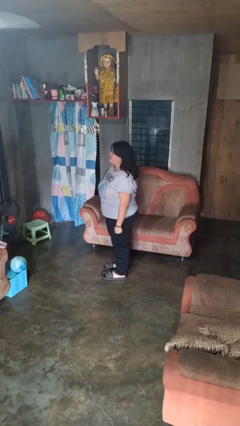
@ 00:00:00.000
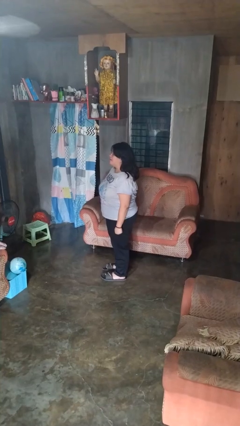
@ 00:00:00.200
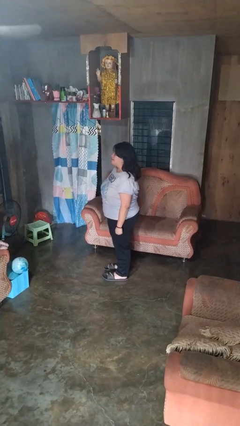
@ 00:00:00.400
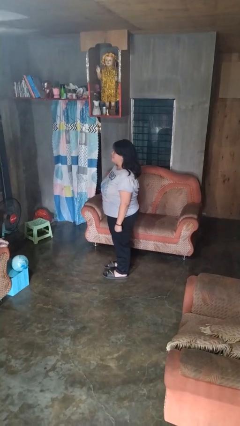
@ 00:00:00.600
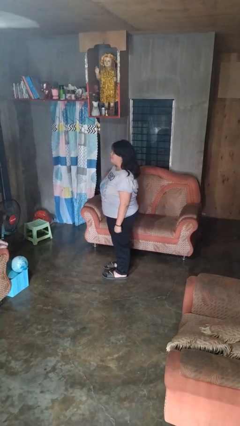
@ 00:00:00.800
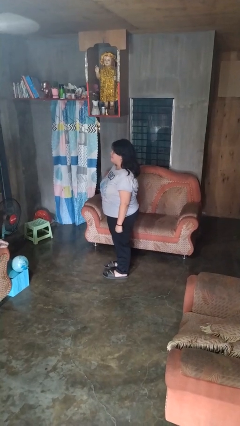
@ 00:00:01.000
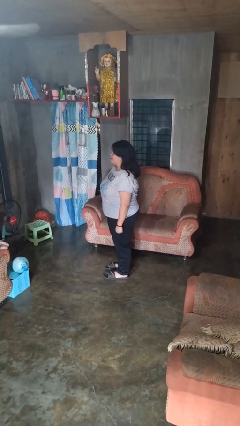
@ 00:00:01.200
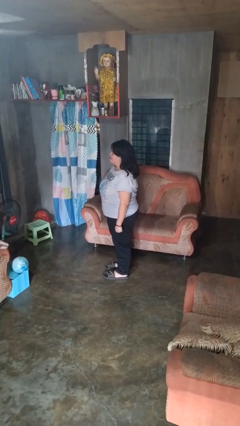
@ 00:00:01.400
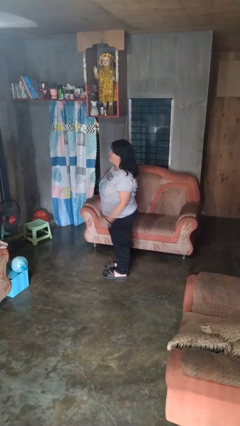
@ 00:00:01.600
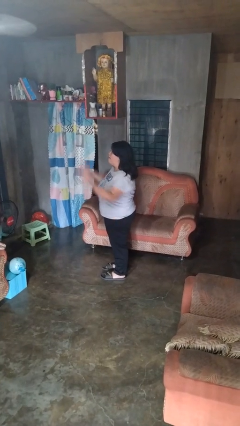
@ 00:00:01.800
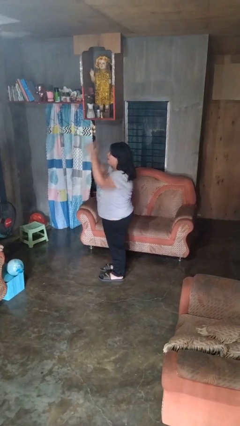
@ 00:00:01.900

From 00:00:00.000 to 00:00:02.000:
person stretches arms over head

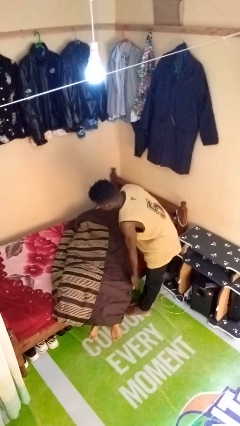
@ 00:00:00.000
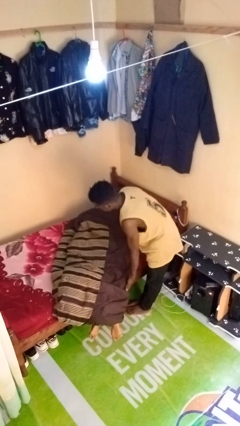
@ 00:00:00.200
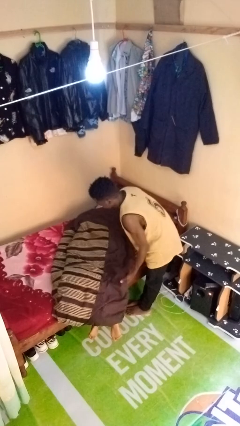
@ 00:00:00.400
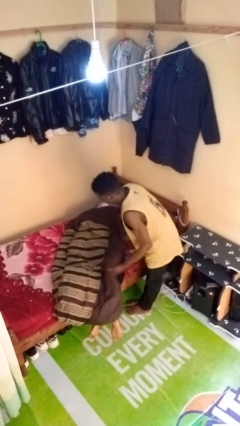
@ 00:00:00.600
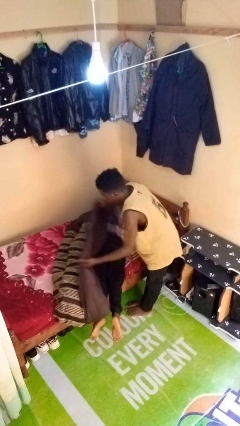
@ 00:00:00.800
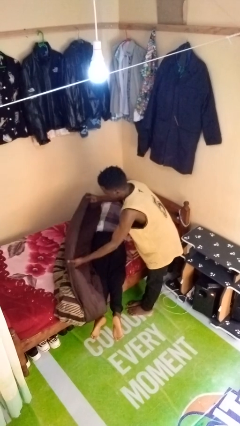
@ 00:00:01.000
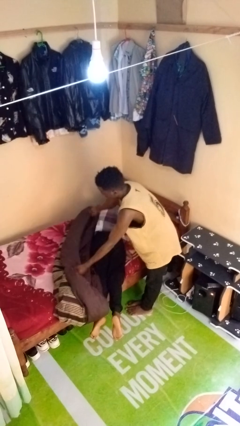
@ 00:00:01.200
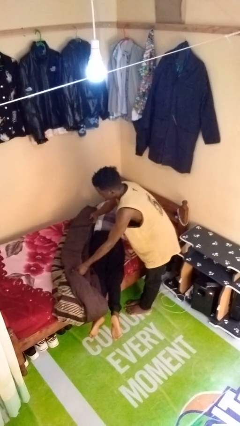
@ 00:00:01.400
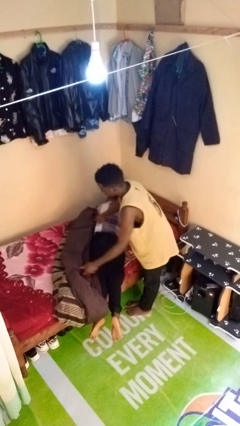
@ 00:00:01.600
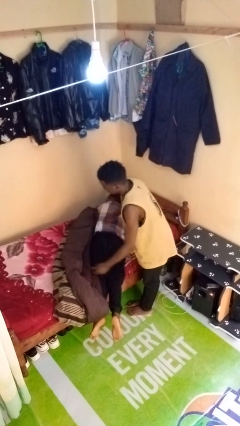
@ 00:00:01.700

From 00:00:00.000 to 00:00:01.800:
person uncovers friend with blanket

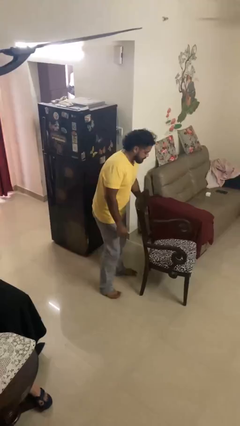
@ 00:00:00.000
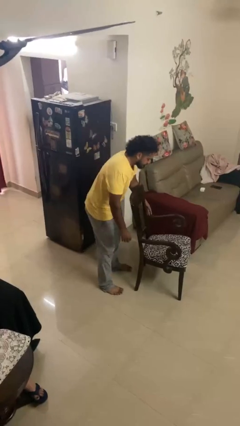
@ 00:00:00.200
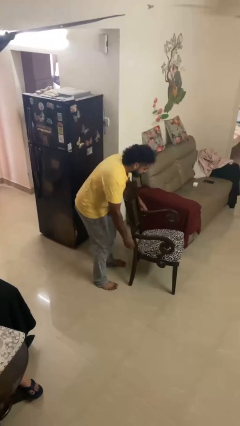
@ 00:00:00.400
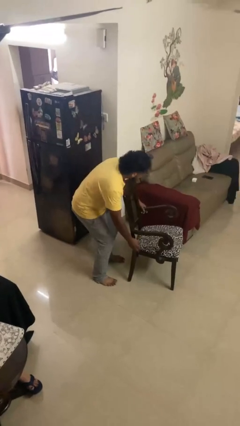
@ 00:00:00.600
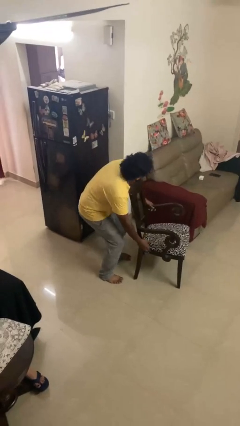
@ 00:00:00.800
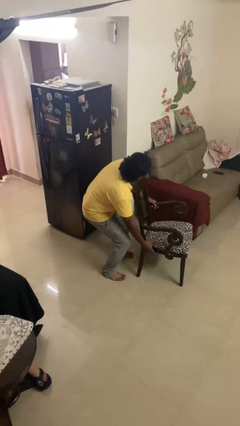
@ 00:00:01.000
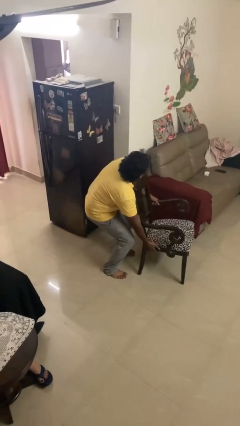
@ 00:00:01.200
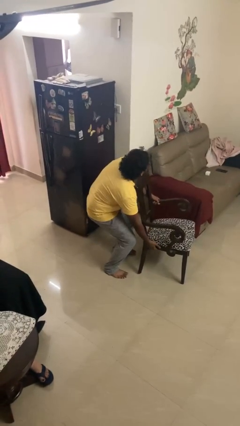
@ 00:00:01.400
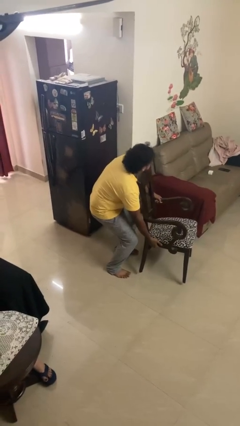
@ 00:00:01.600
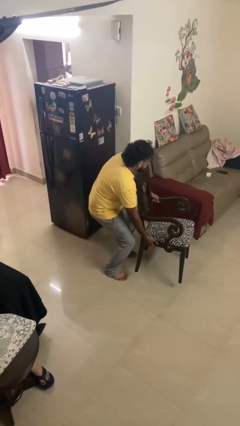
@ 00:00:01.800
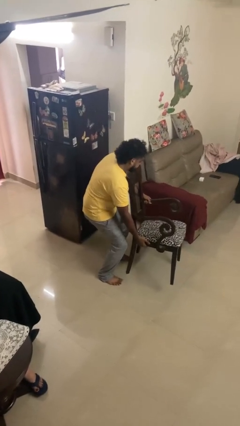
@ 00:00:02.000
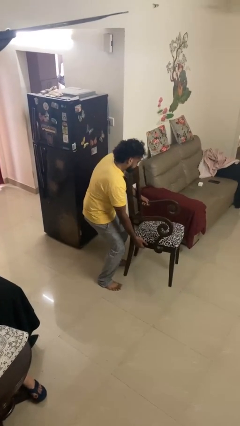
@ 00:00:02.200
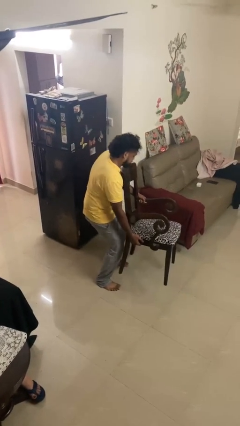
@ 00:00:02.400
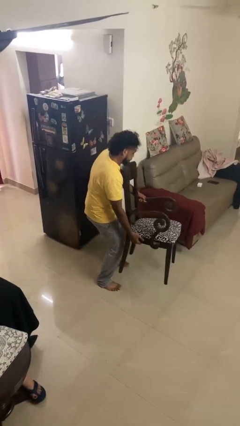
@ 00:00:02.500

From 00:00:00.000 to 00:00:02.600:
person picks up object from floor

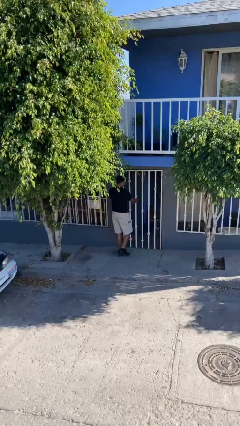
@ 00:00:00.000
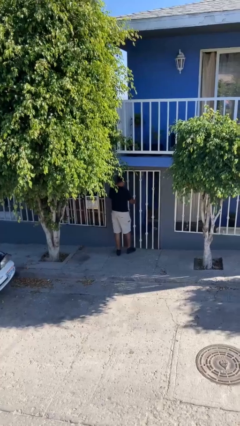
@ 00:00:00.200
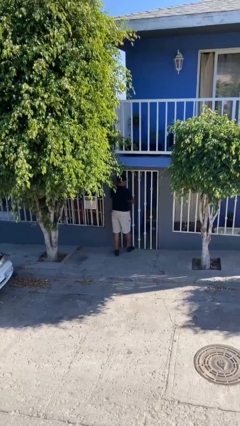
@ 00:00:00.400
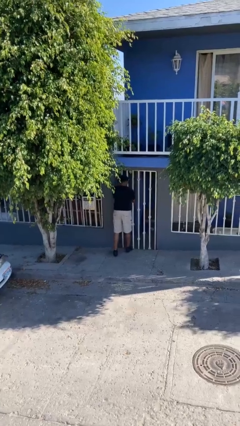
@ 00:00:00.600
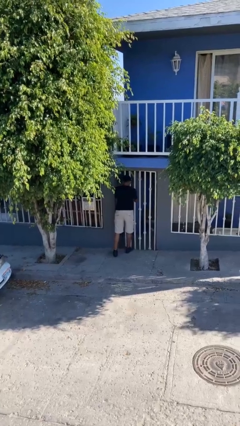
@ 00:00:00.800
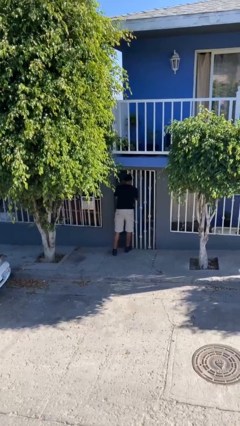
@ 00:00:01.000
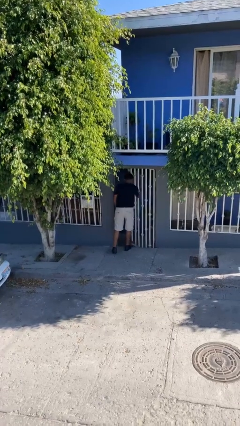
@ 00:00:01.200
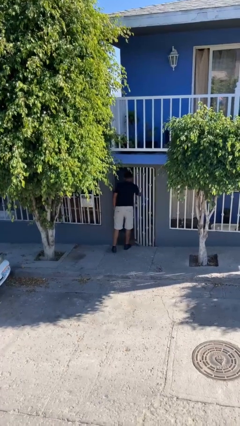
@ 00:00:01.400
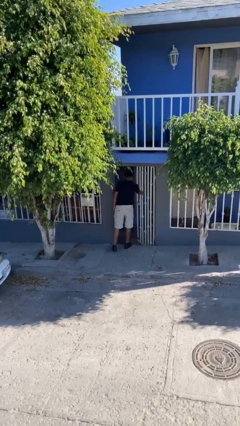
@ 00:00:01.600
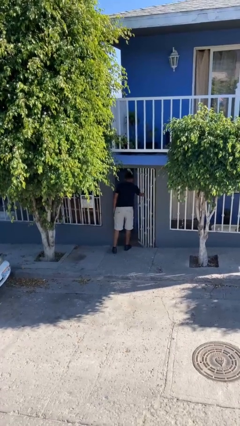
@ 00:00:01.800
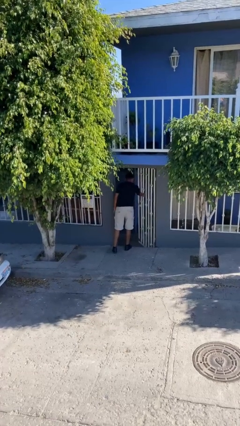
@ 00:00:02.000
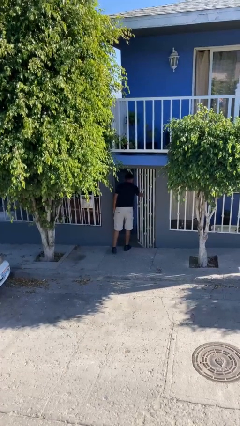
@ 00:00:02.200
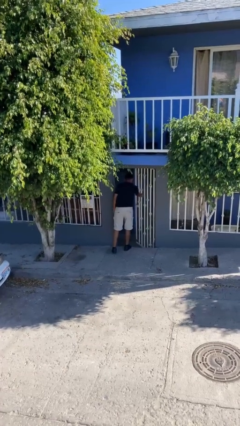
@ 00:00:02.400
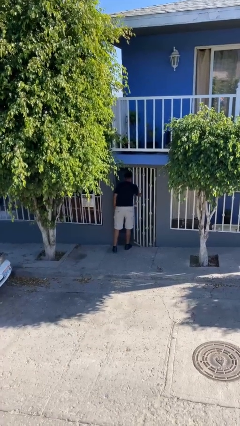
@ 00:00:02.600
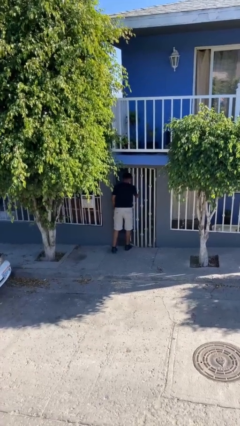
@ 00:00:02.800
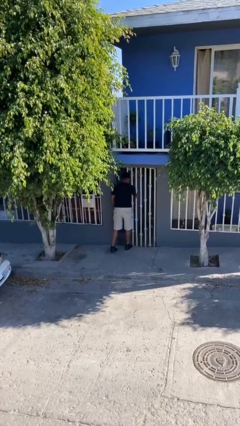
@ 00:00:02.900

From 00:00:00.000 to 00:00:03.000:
person opens facility door

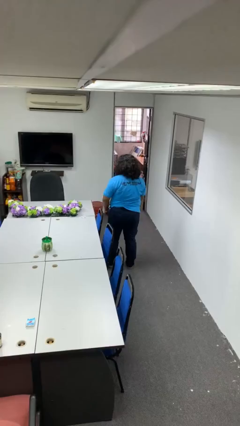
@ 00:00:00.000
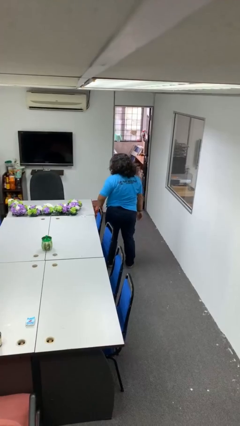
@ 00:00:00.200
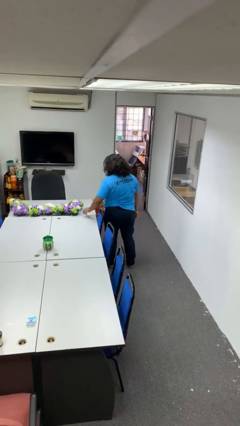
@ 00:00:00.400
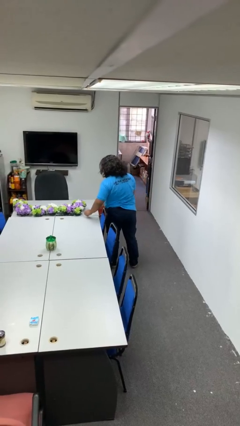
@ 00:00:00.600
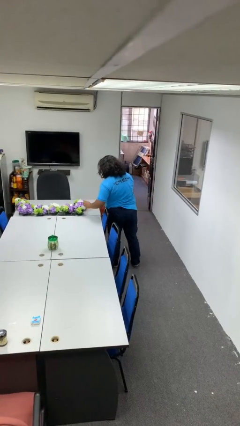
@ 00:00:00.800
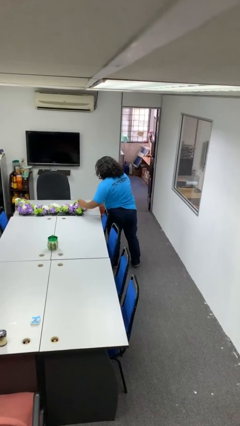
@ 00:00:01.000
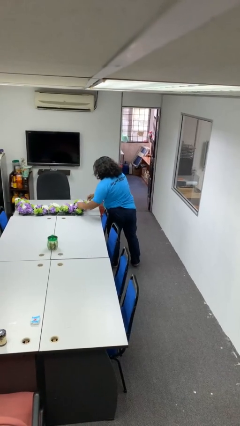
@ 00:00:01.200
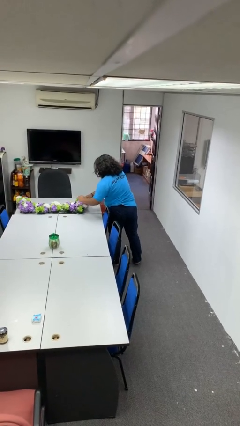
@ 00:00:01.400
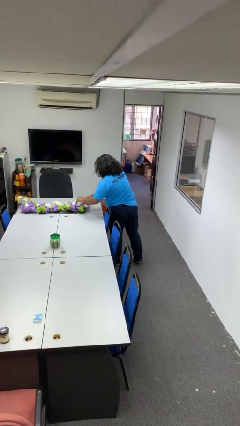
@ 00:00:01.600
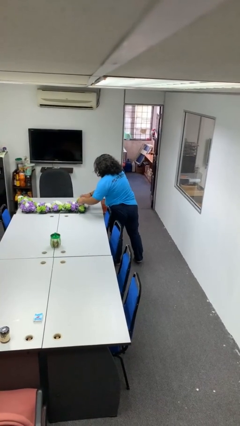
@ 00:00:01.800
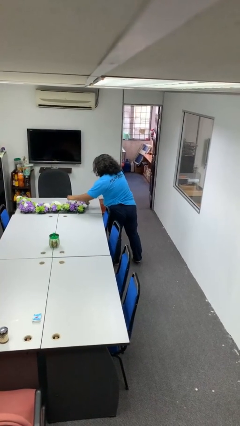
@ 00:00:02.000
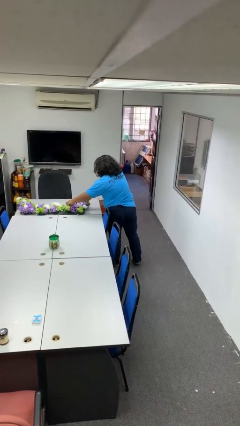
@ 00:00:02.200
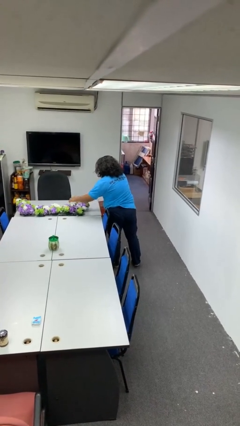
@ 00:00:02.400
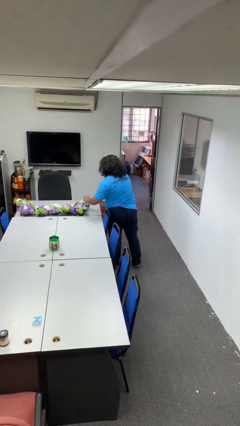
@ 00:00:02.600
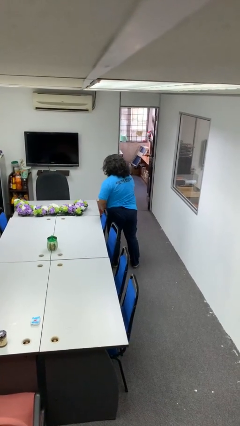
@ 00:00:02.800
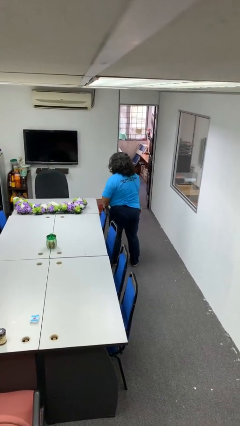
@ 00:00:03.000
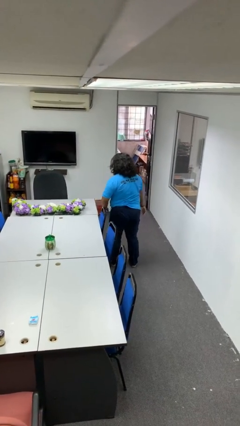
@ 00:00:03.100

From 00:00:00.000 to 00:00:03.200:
person arranges flowers in vase

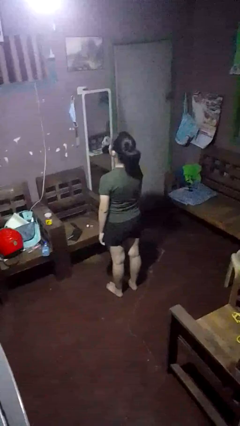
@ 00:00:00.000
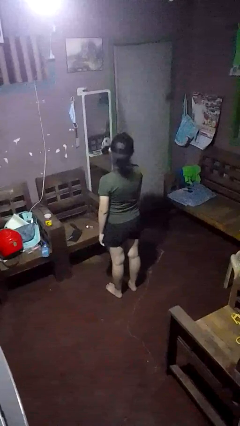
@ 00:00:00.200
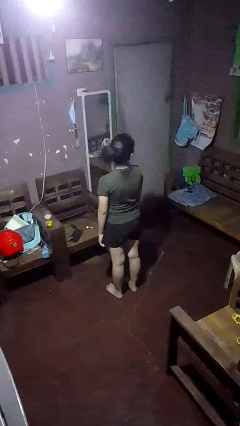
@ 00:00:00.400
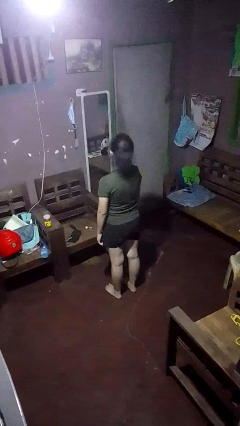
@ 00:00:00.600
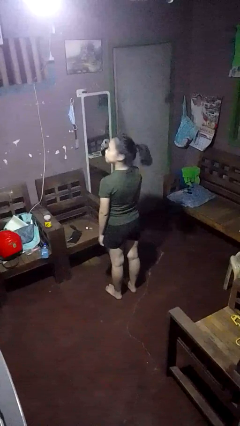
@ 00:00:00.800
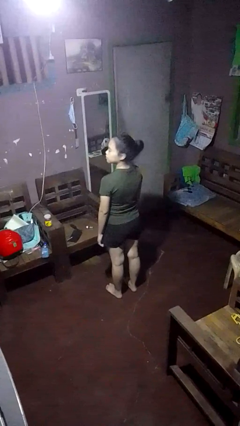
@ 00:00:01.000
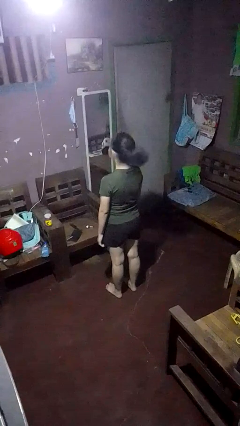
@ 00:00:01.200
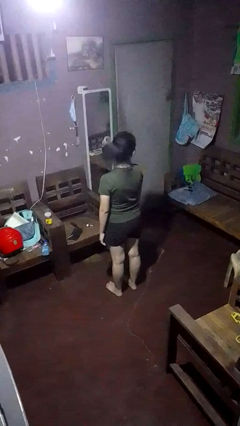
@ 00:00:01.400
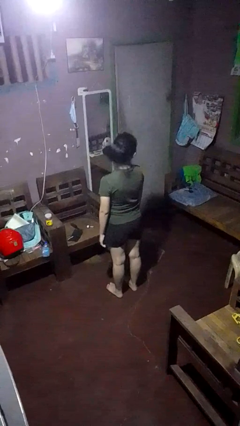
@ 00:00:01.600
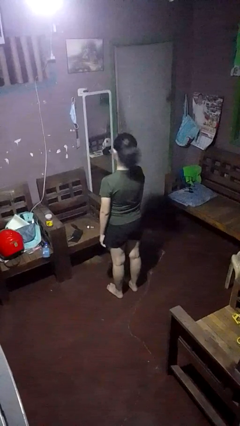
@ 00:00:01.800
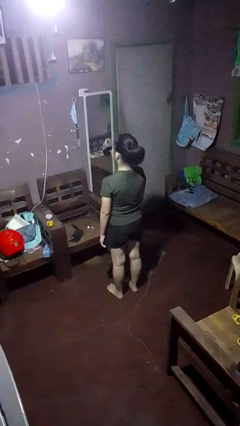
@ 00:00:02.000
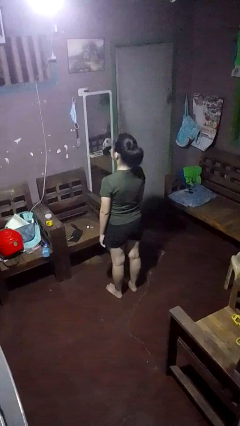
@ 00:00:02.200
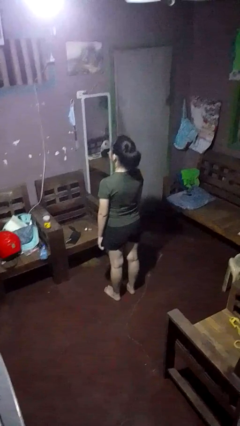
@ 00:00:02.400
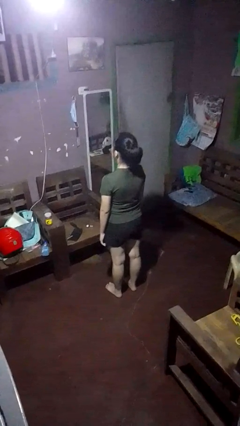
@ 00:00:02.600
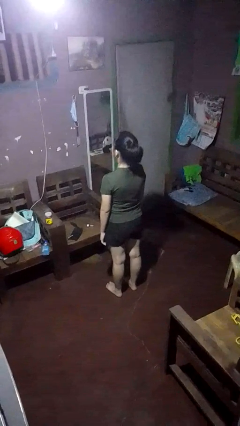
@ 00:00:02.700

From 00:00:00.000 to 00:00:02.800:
person shakes head

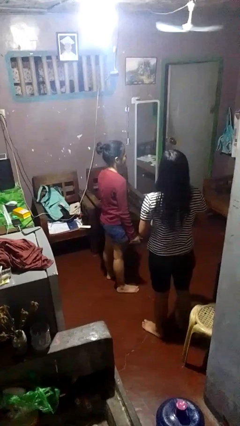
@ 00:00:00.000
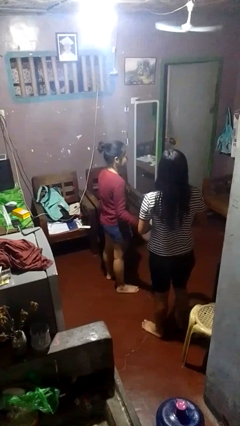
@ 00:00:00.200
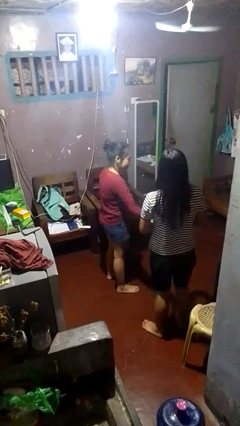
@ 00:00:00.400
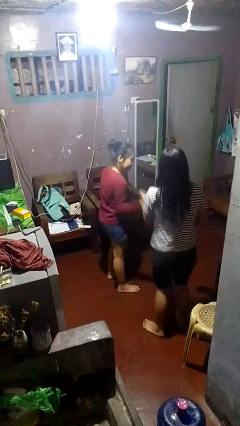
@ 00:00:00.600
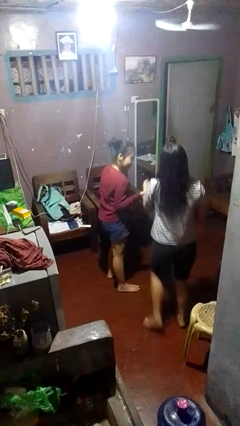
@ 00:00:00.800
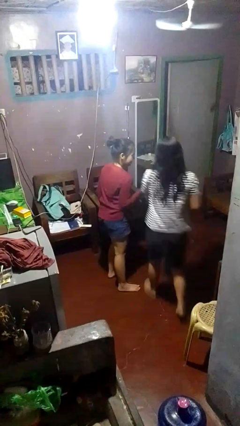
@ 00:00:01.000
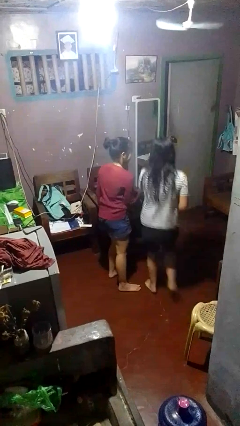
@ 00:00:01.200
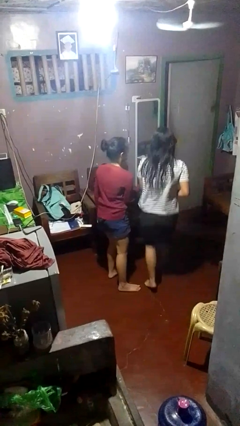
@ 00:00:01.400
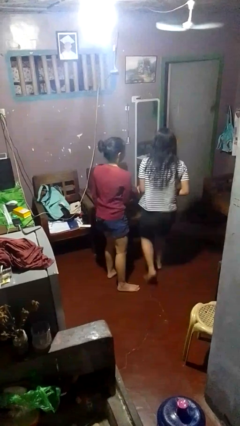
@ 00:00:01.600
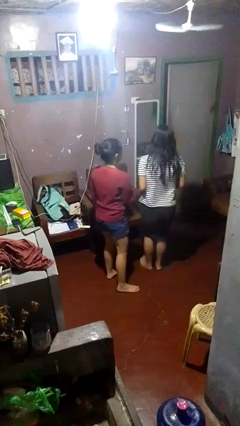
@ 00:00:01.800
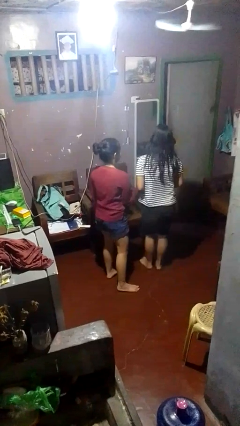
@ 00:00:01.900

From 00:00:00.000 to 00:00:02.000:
person grabs person by forearm
